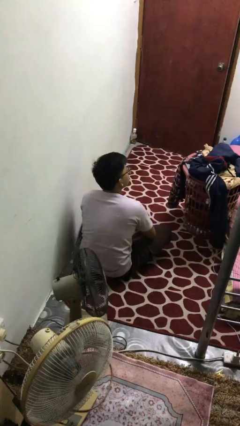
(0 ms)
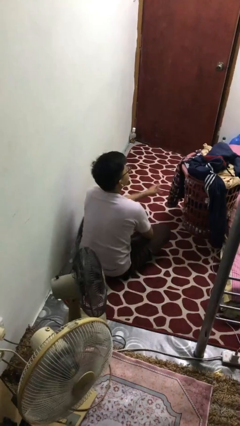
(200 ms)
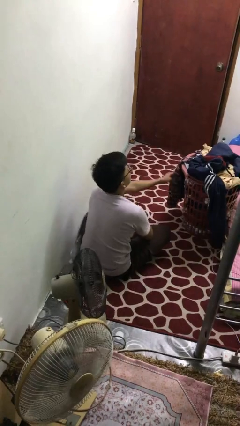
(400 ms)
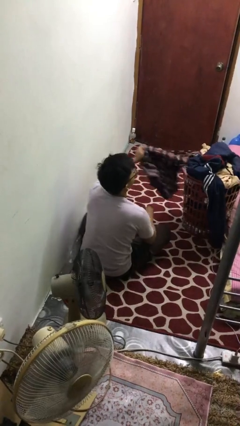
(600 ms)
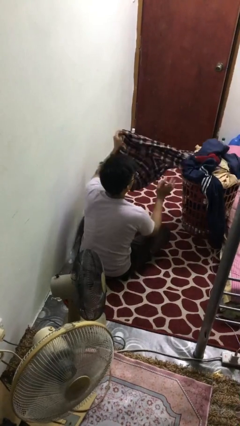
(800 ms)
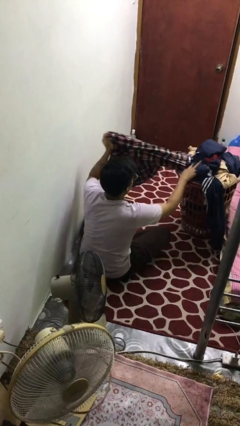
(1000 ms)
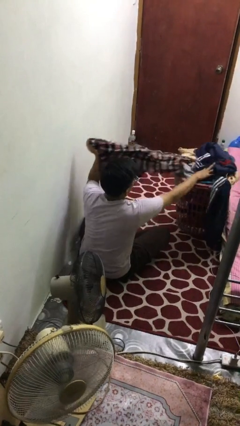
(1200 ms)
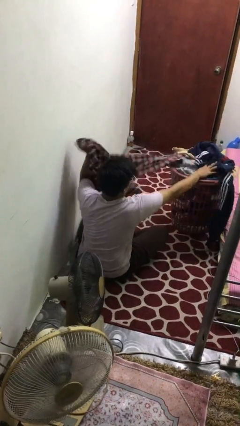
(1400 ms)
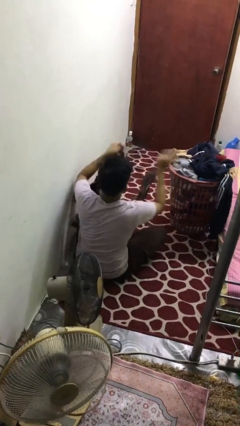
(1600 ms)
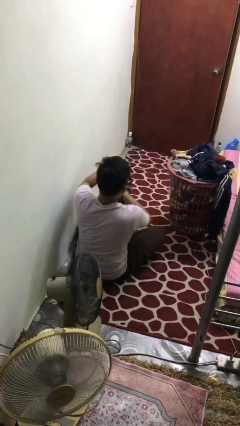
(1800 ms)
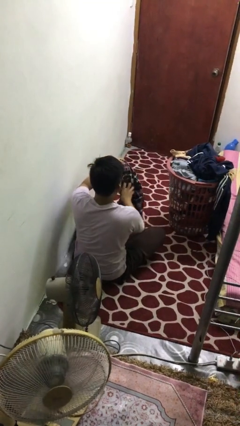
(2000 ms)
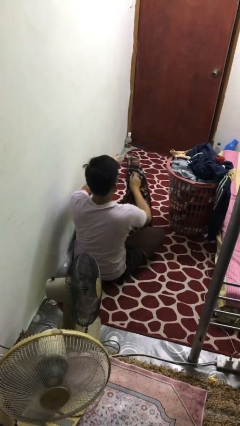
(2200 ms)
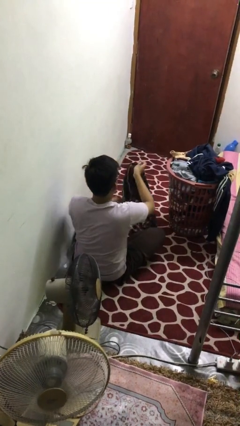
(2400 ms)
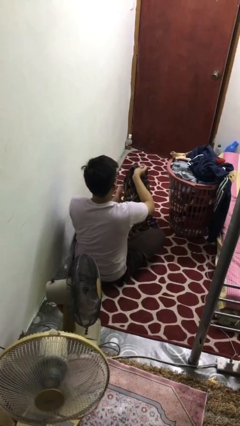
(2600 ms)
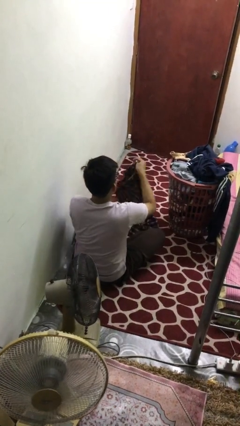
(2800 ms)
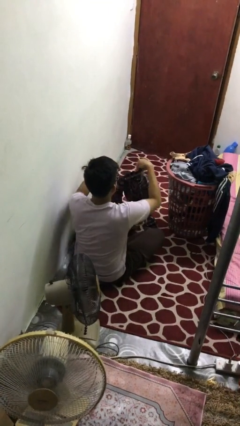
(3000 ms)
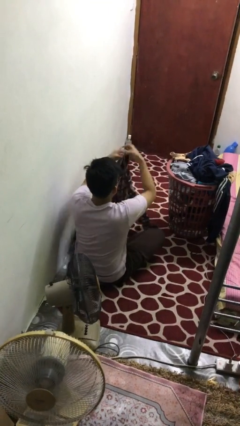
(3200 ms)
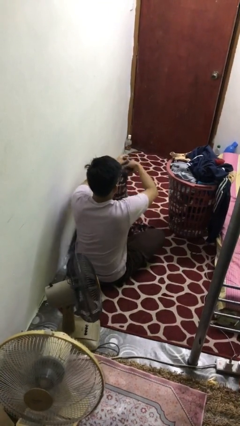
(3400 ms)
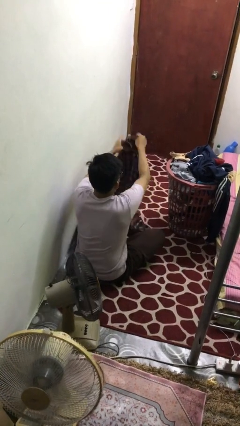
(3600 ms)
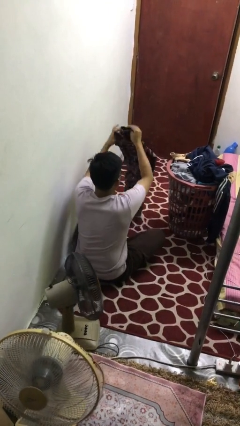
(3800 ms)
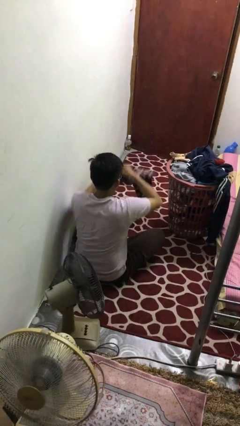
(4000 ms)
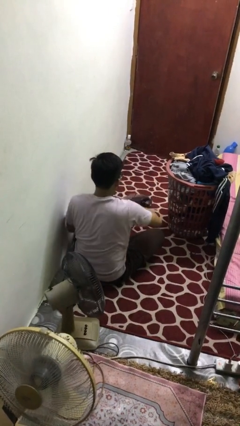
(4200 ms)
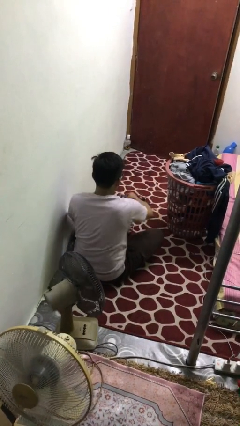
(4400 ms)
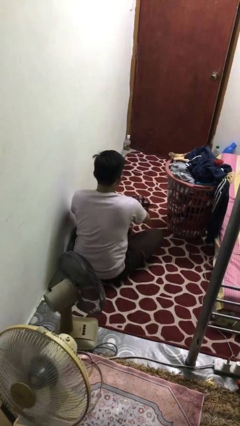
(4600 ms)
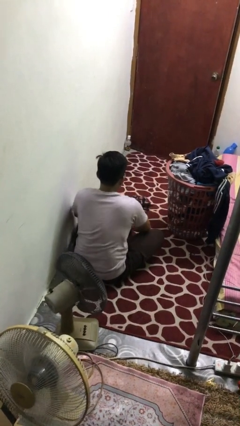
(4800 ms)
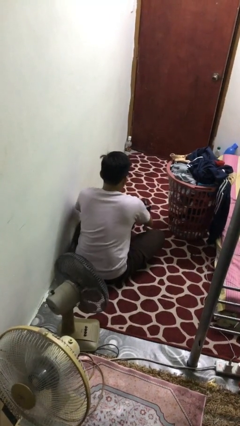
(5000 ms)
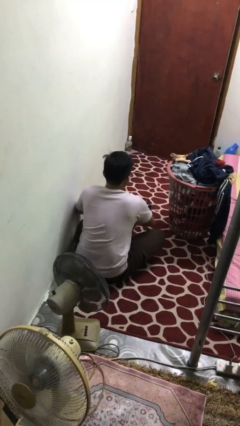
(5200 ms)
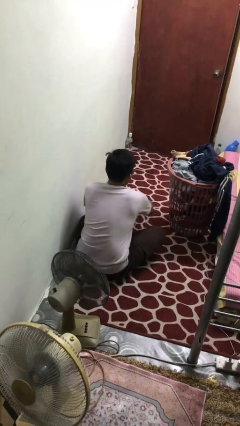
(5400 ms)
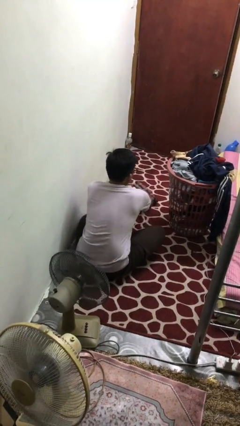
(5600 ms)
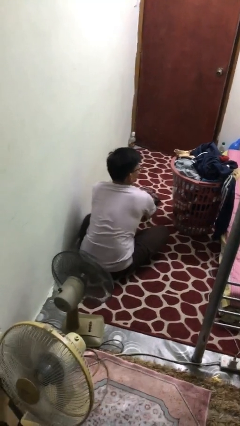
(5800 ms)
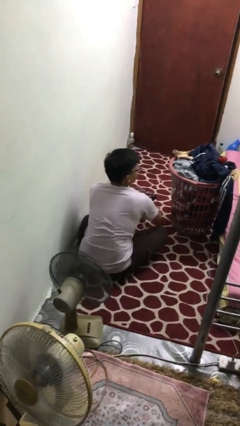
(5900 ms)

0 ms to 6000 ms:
person folds pants

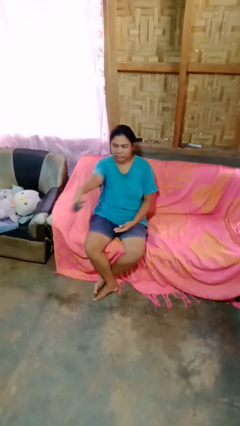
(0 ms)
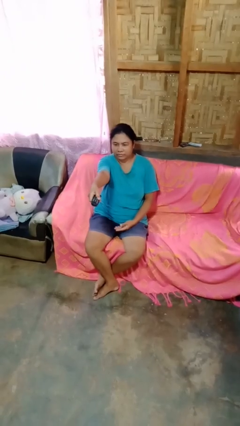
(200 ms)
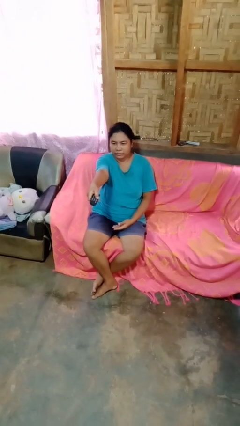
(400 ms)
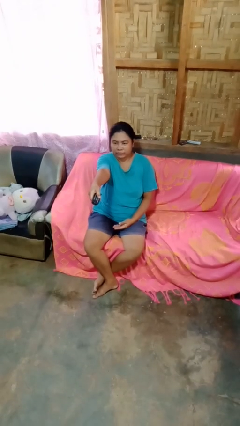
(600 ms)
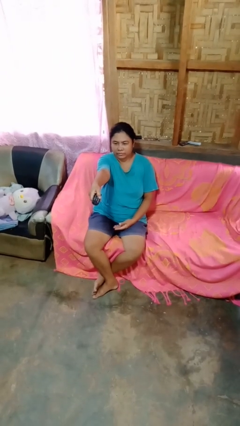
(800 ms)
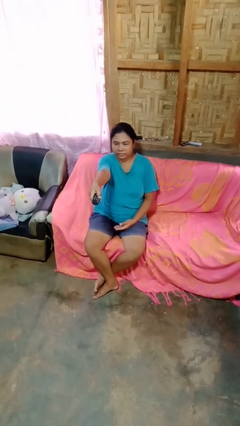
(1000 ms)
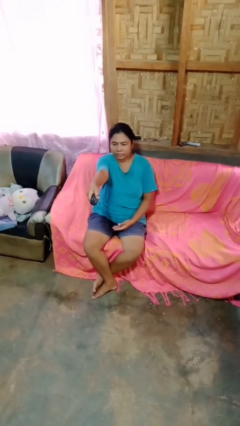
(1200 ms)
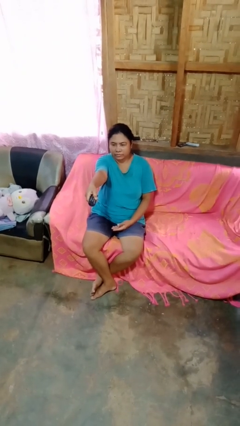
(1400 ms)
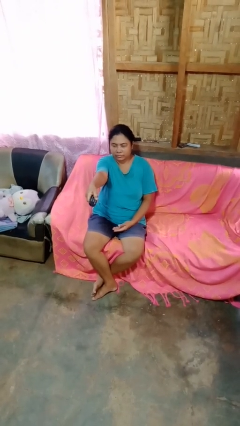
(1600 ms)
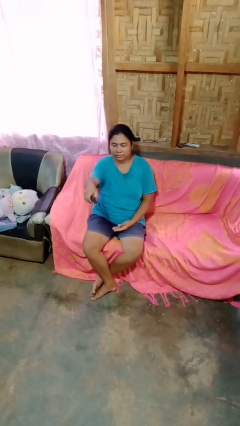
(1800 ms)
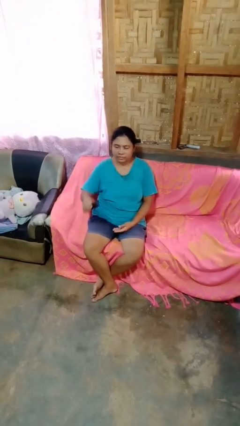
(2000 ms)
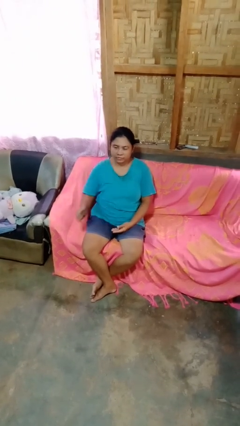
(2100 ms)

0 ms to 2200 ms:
person uses television remote

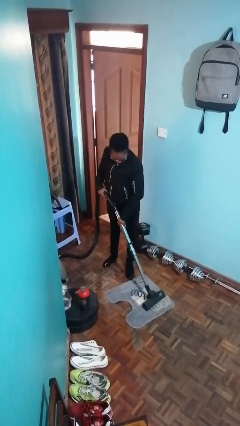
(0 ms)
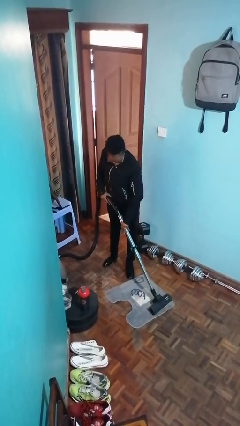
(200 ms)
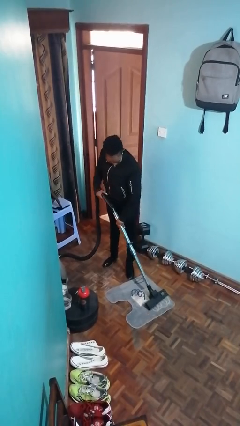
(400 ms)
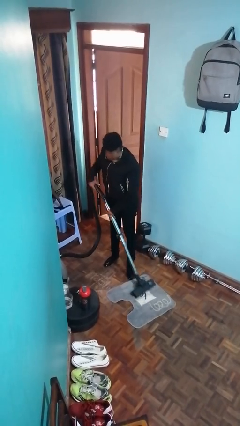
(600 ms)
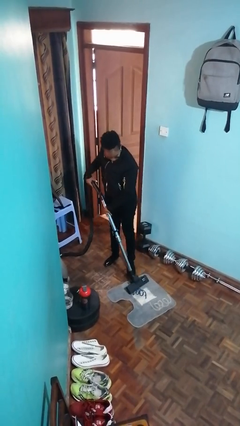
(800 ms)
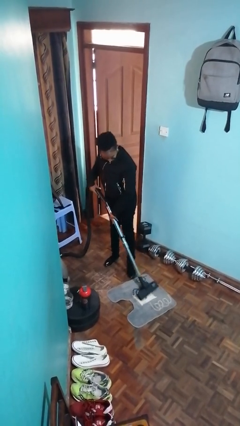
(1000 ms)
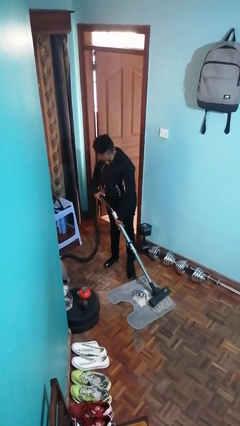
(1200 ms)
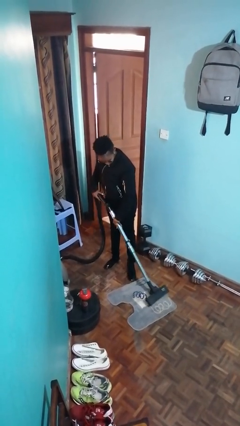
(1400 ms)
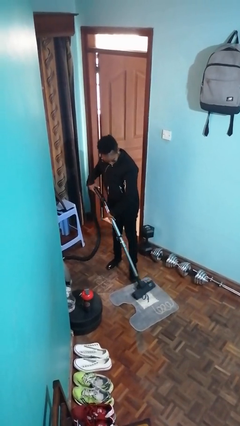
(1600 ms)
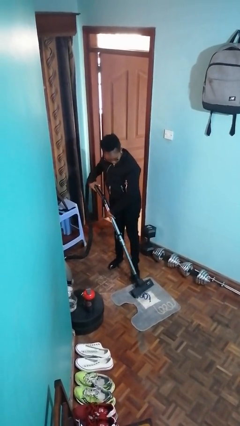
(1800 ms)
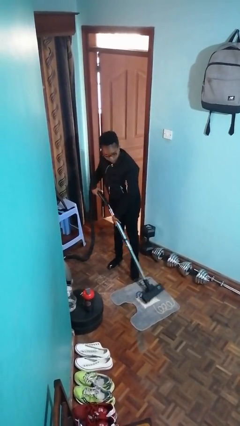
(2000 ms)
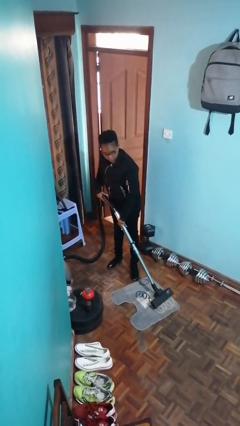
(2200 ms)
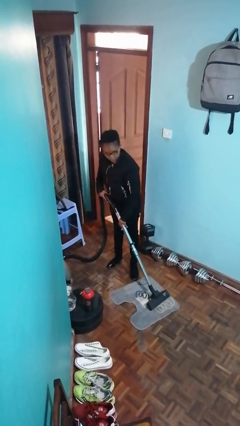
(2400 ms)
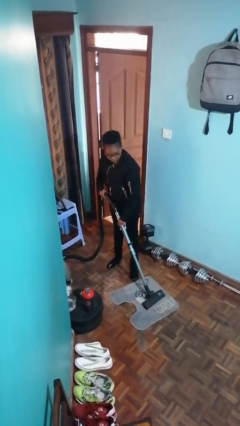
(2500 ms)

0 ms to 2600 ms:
person vacuums carpet

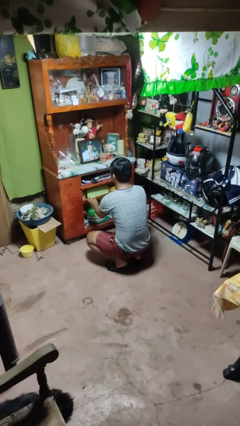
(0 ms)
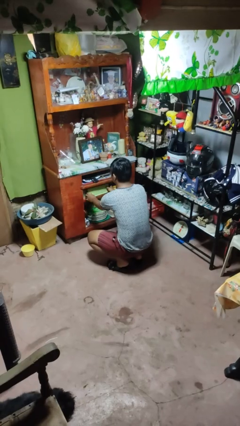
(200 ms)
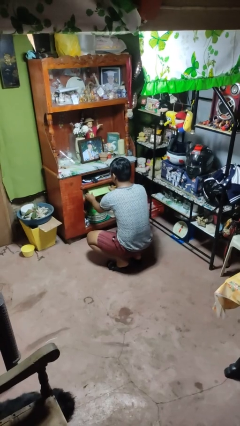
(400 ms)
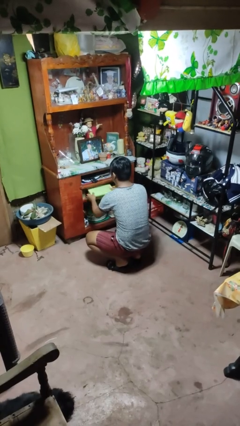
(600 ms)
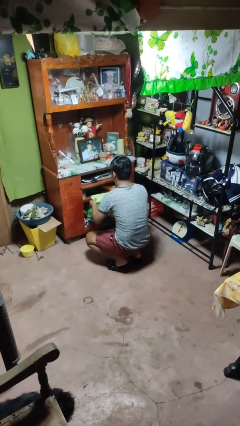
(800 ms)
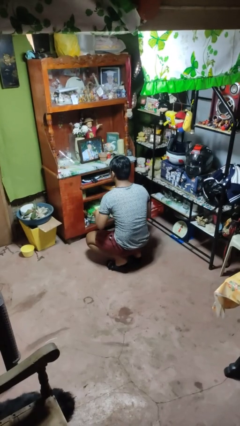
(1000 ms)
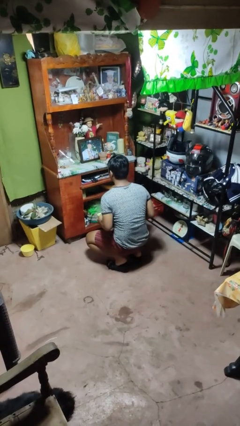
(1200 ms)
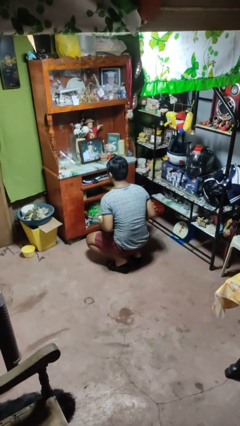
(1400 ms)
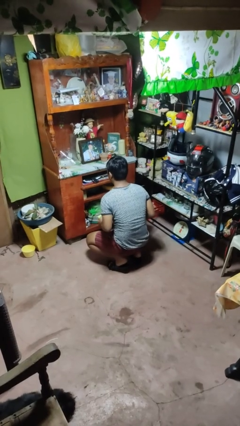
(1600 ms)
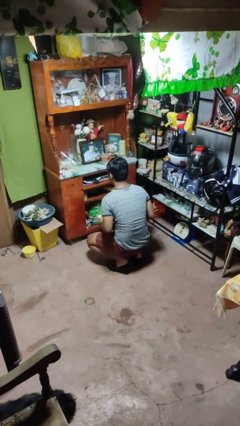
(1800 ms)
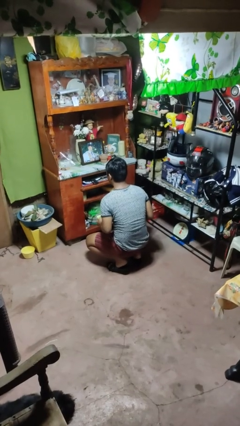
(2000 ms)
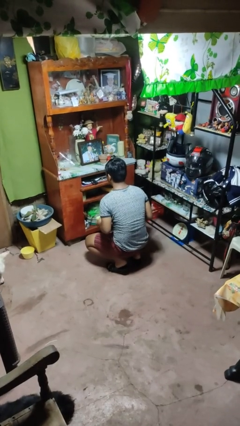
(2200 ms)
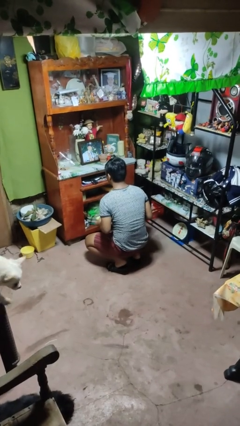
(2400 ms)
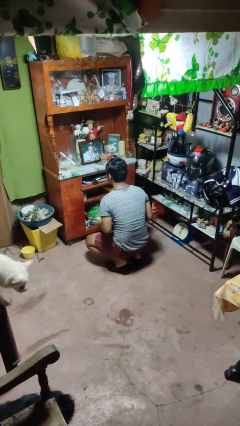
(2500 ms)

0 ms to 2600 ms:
person picks up object from cabinet

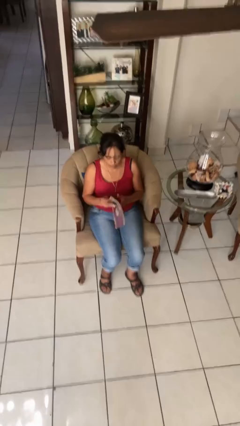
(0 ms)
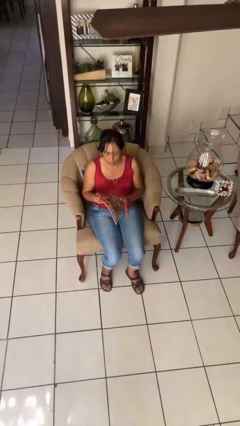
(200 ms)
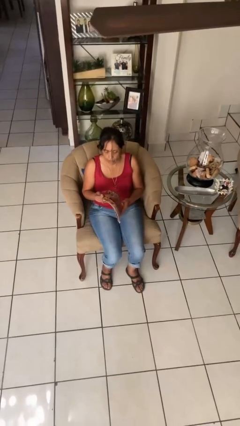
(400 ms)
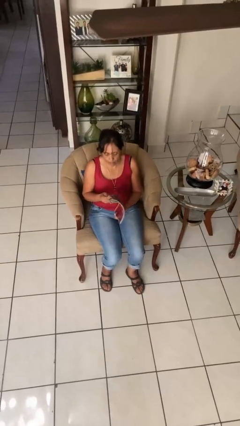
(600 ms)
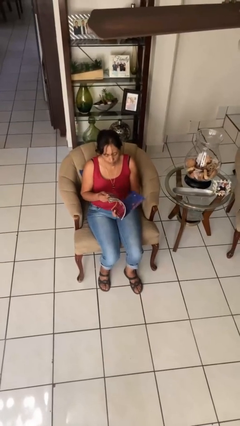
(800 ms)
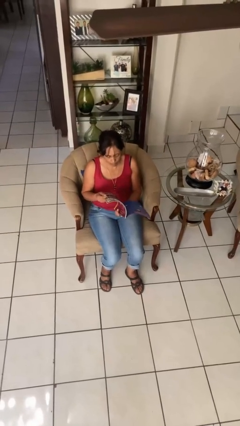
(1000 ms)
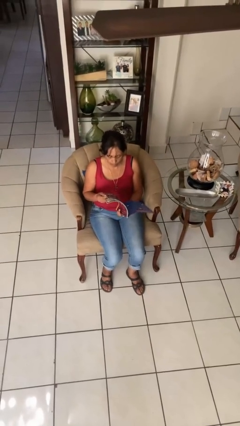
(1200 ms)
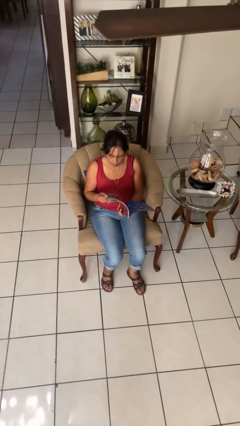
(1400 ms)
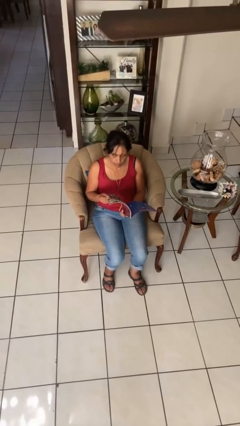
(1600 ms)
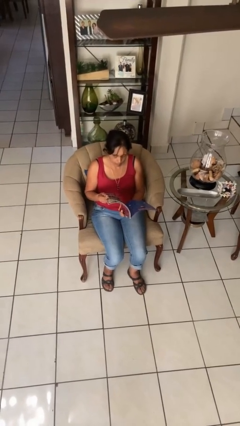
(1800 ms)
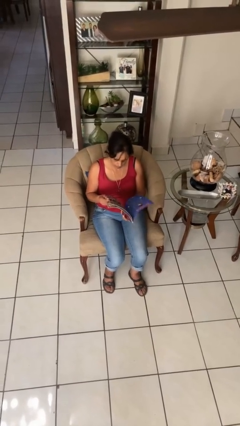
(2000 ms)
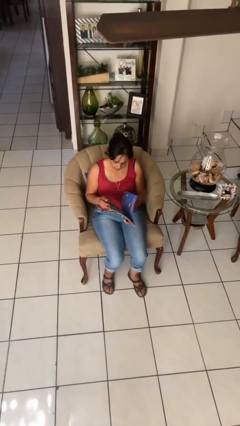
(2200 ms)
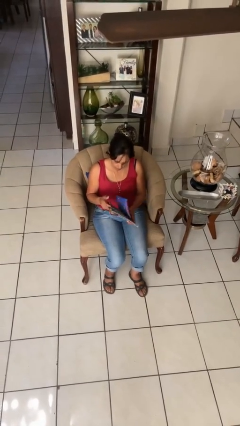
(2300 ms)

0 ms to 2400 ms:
person reads magazine

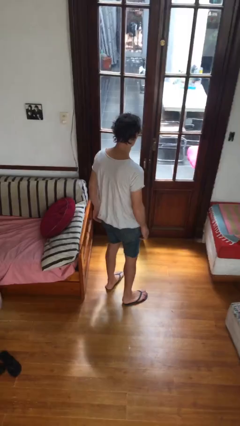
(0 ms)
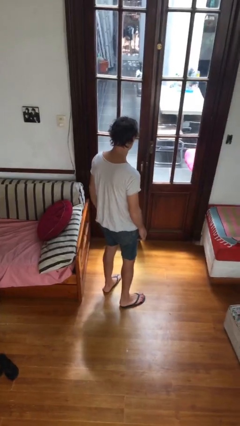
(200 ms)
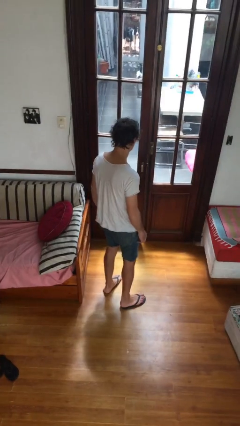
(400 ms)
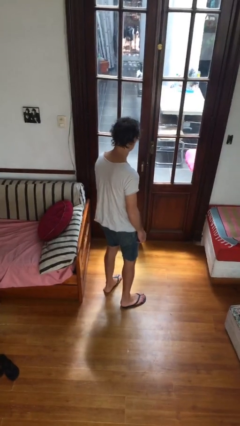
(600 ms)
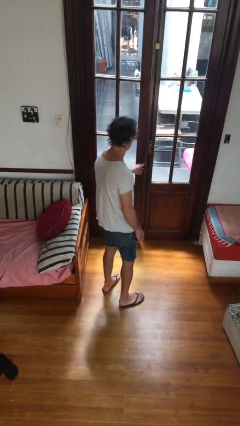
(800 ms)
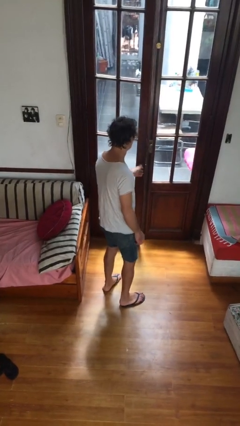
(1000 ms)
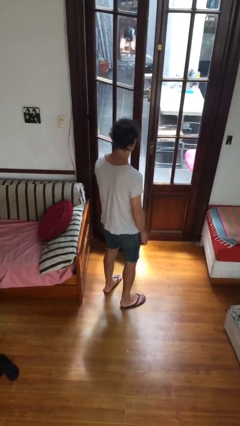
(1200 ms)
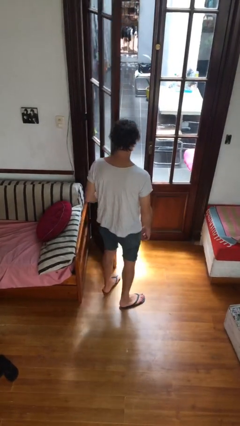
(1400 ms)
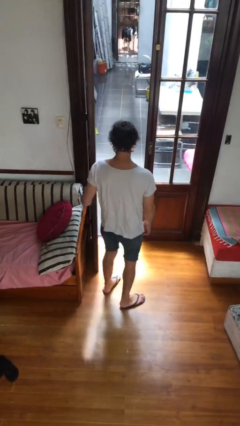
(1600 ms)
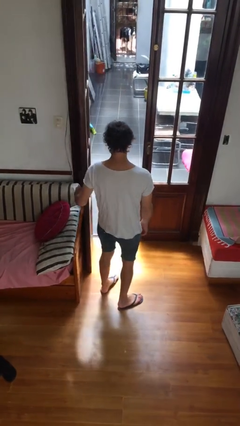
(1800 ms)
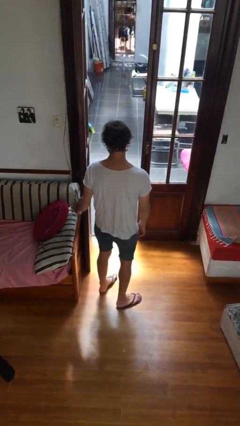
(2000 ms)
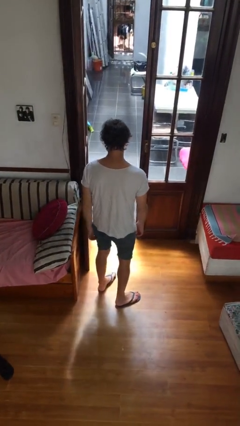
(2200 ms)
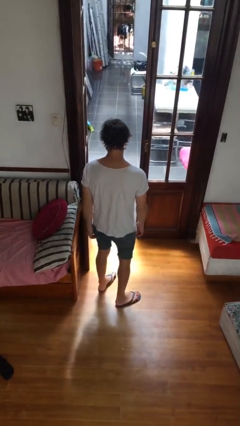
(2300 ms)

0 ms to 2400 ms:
person opens facility door
